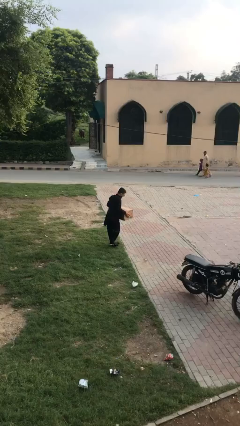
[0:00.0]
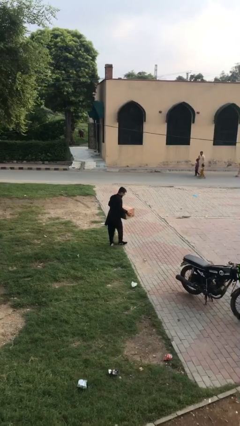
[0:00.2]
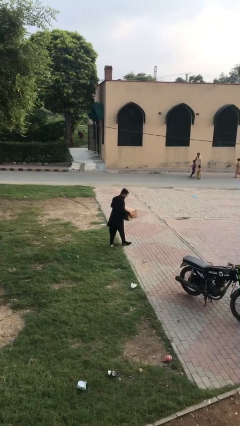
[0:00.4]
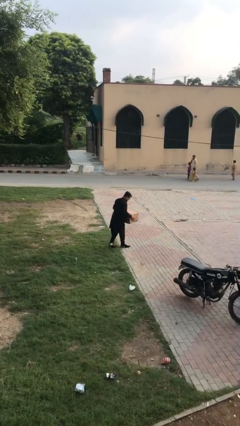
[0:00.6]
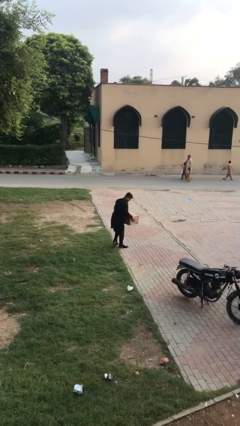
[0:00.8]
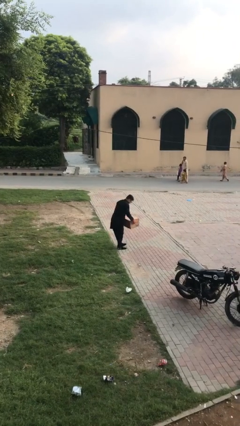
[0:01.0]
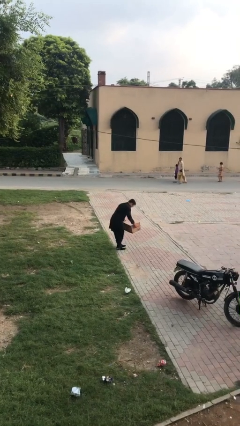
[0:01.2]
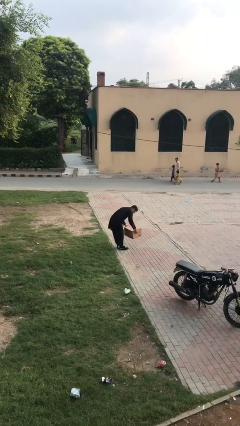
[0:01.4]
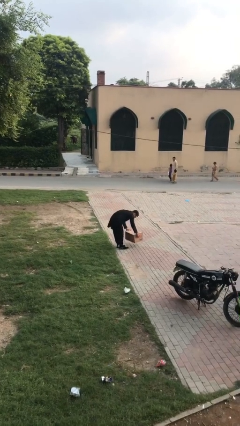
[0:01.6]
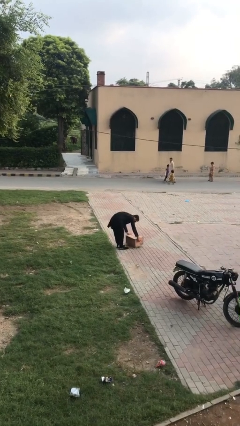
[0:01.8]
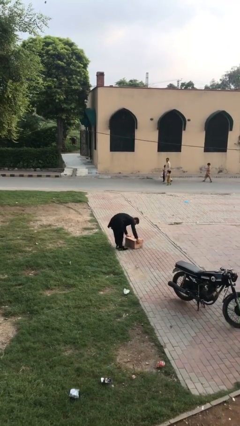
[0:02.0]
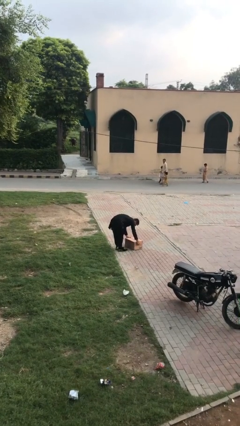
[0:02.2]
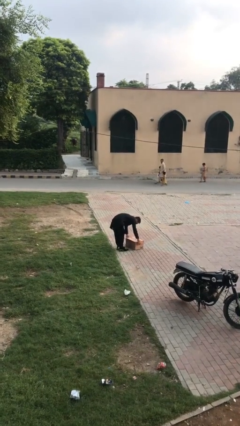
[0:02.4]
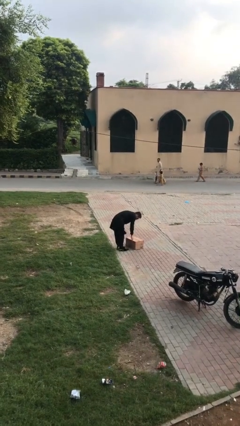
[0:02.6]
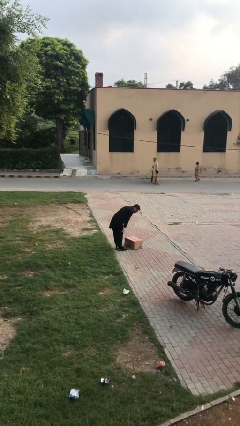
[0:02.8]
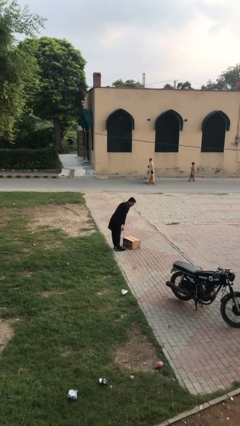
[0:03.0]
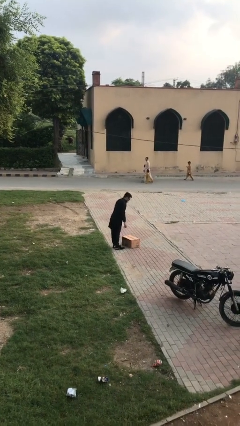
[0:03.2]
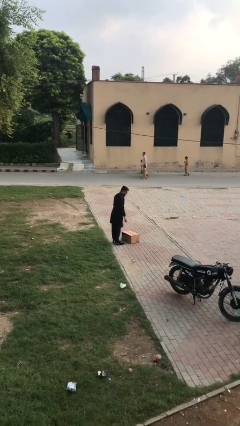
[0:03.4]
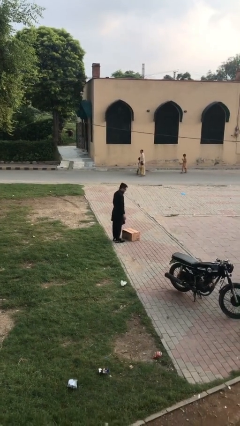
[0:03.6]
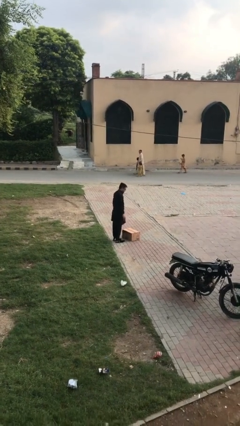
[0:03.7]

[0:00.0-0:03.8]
person puts down object on floor

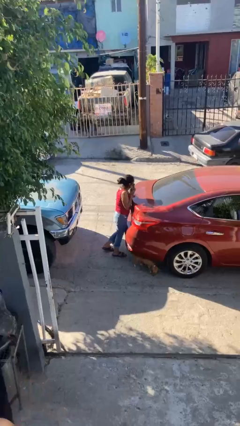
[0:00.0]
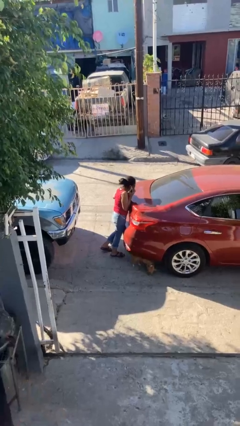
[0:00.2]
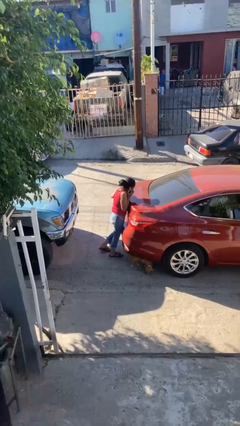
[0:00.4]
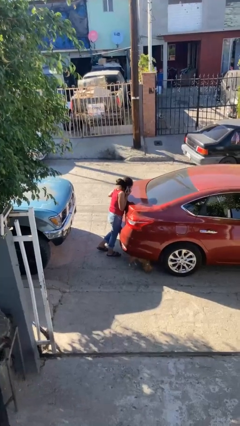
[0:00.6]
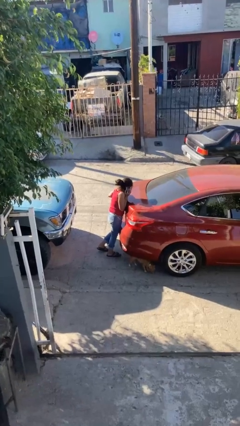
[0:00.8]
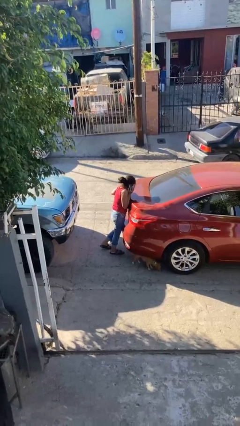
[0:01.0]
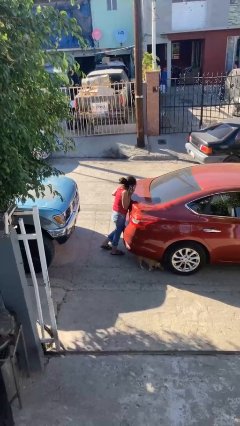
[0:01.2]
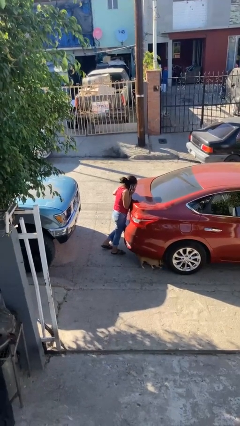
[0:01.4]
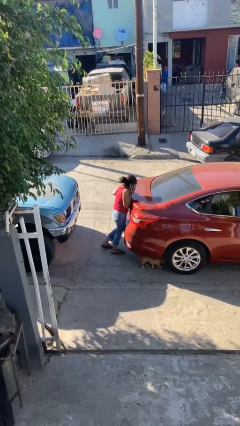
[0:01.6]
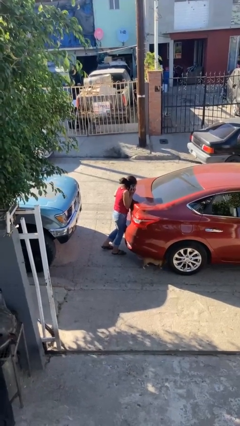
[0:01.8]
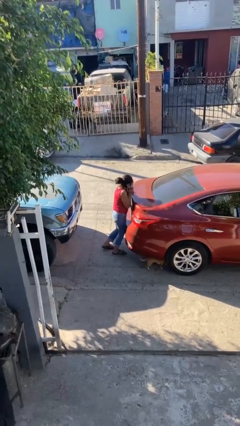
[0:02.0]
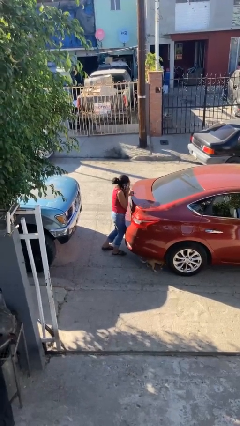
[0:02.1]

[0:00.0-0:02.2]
person leans against car

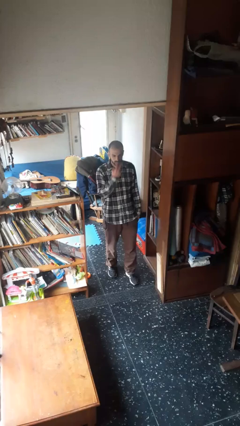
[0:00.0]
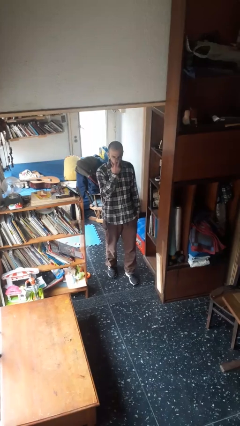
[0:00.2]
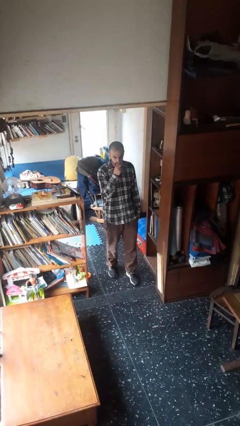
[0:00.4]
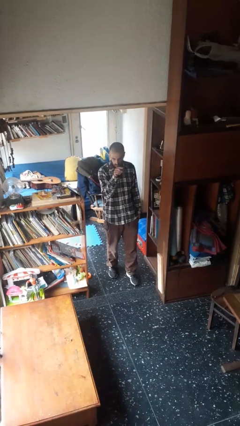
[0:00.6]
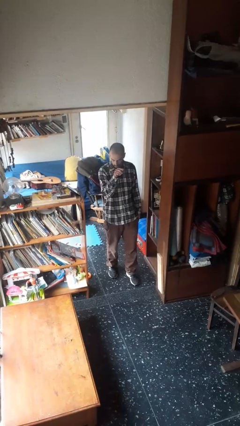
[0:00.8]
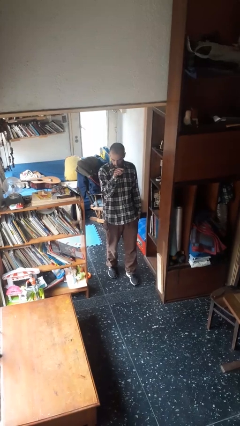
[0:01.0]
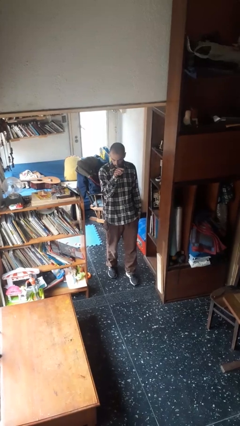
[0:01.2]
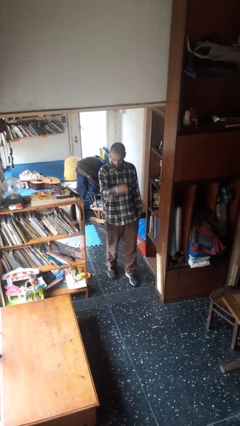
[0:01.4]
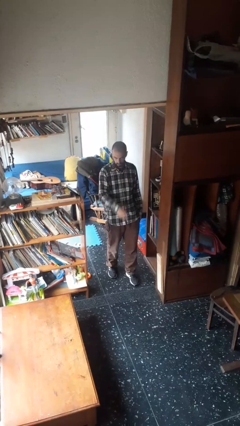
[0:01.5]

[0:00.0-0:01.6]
person gestures watch closely

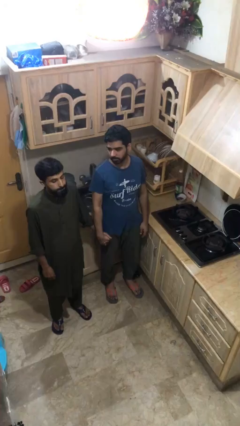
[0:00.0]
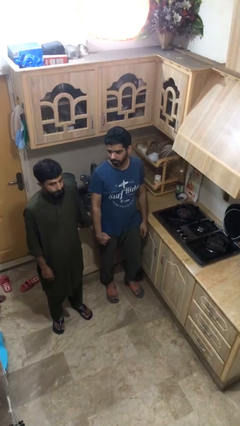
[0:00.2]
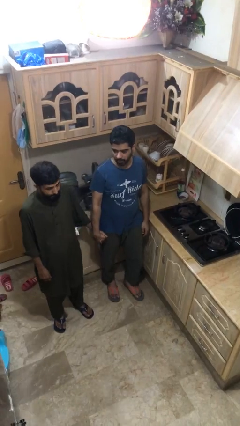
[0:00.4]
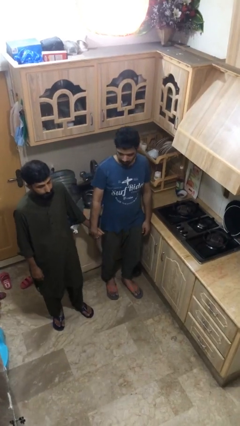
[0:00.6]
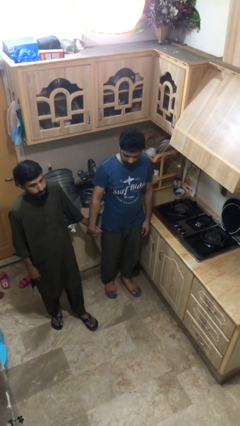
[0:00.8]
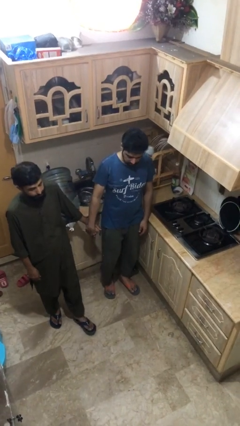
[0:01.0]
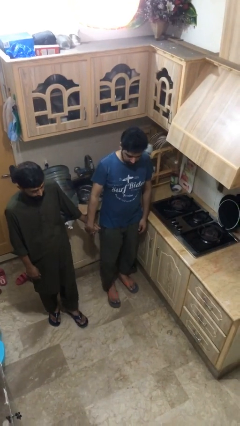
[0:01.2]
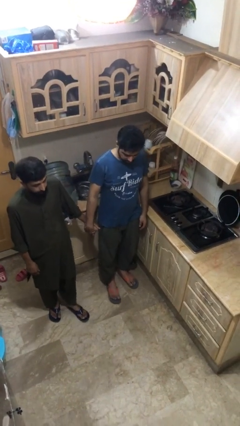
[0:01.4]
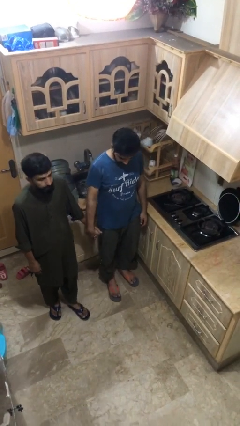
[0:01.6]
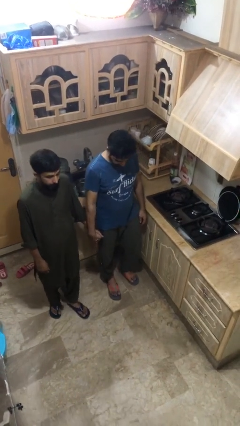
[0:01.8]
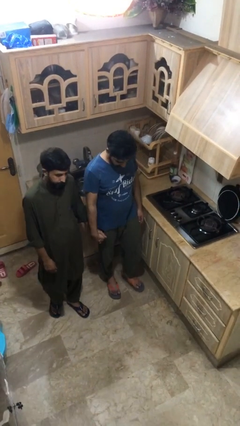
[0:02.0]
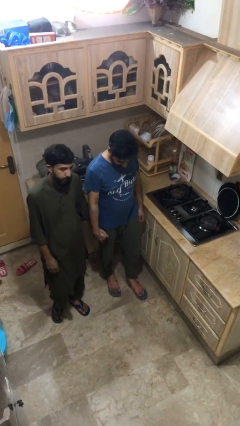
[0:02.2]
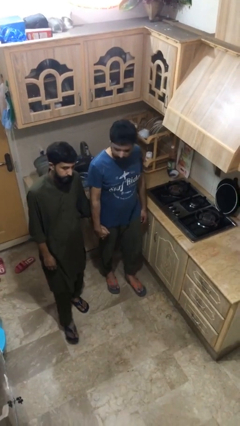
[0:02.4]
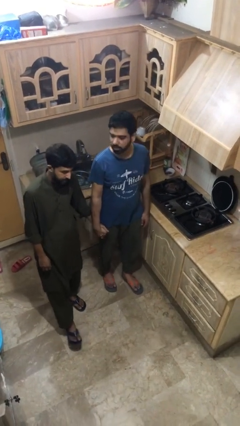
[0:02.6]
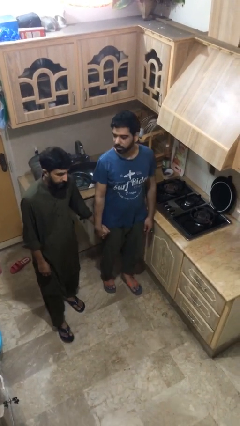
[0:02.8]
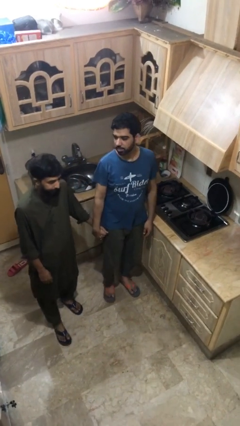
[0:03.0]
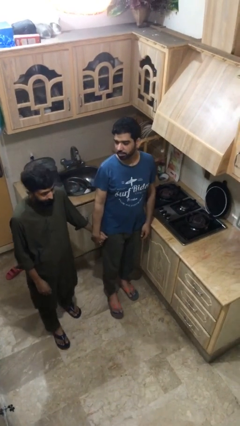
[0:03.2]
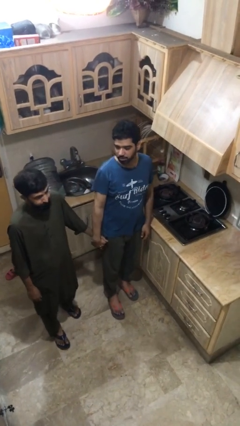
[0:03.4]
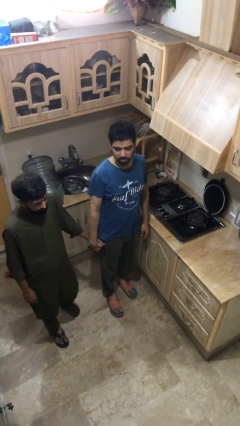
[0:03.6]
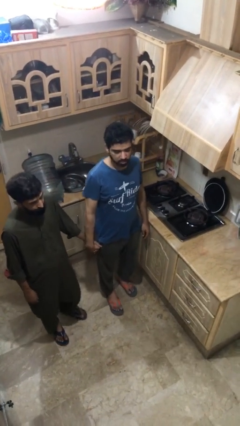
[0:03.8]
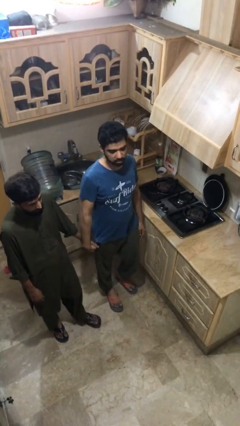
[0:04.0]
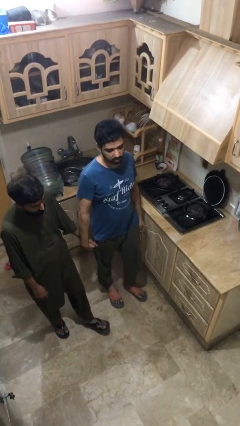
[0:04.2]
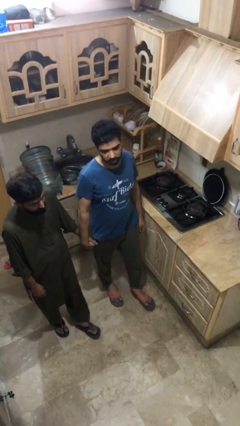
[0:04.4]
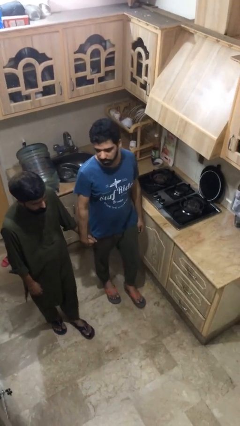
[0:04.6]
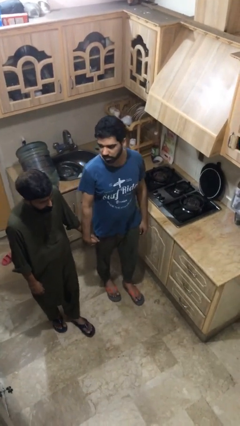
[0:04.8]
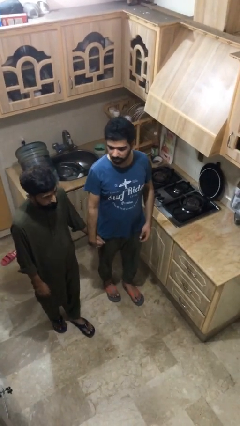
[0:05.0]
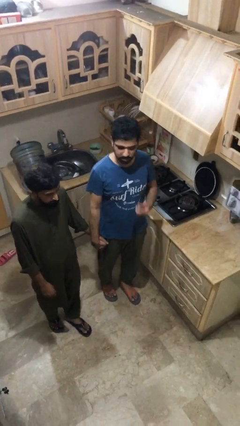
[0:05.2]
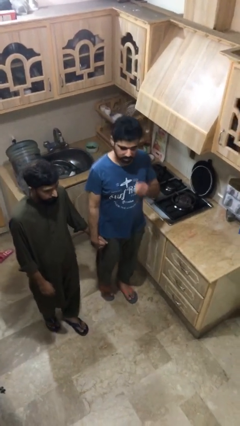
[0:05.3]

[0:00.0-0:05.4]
person holds hand

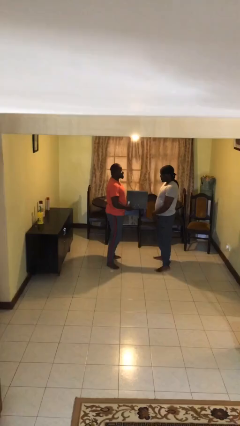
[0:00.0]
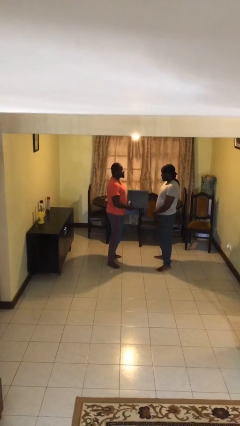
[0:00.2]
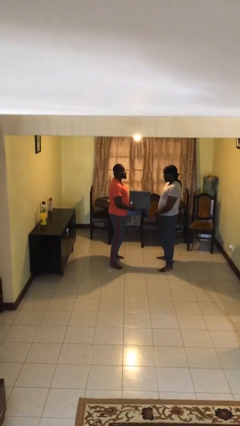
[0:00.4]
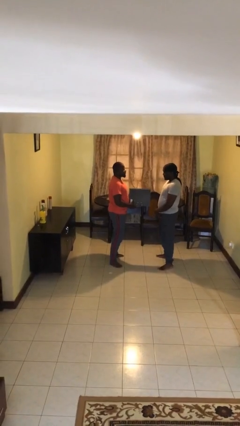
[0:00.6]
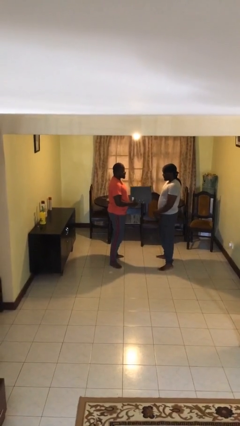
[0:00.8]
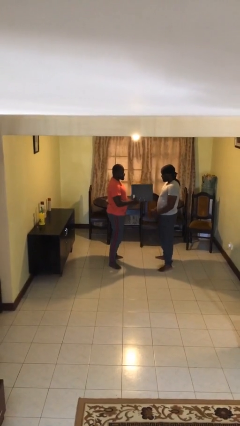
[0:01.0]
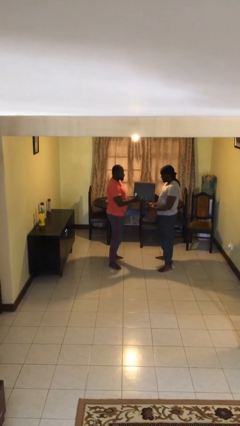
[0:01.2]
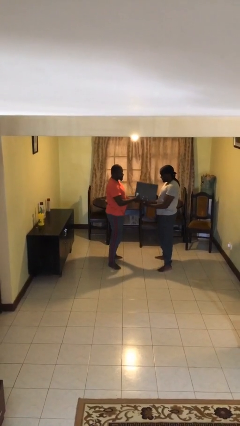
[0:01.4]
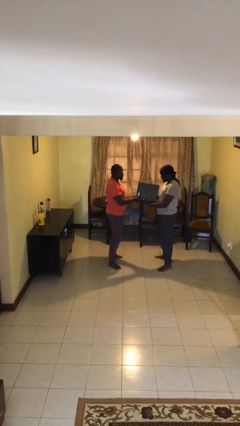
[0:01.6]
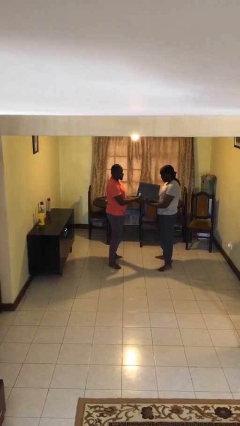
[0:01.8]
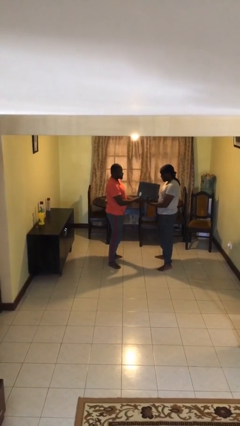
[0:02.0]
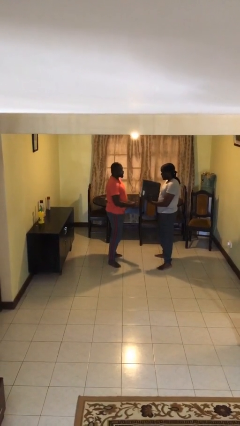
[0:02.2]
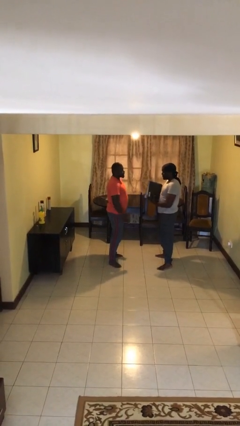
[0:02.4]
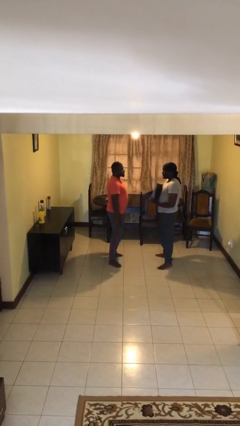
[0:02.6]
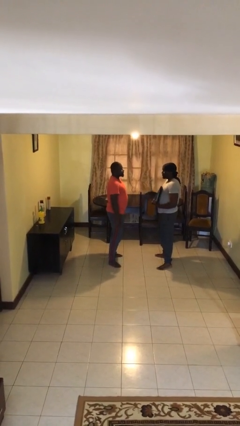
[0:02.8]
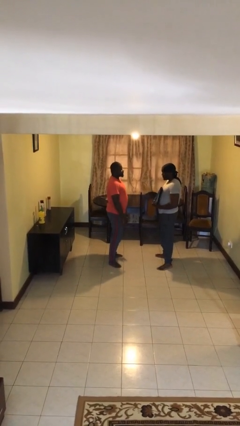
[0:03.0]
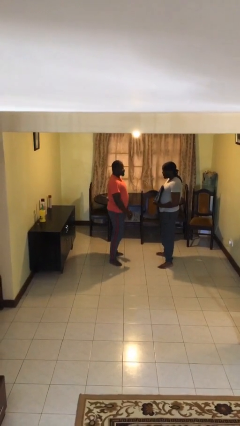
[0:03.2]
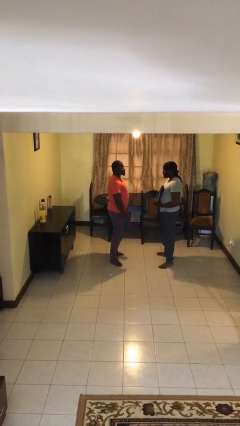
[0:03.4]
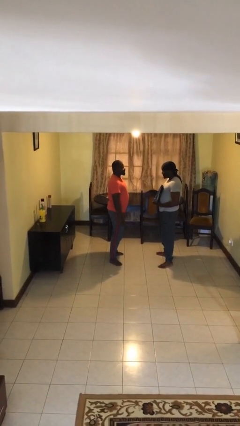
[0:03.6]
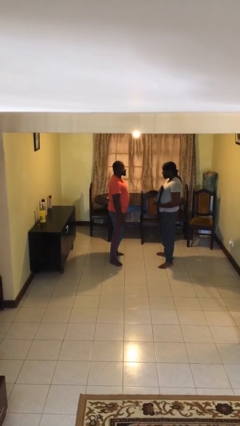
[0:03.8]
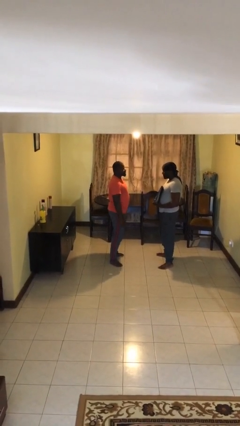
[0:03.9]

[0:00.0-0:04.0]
person transfers object to person

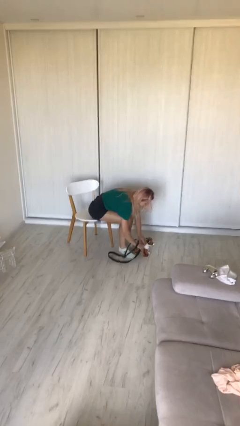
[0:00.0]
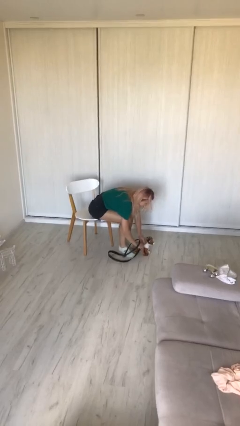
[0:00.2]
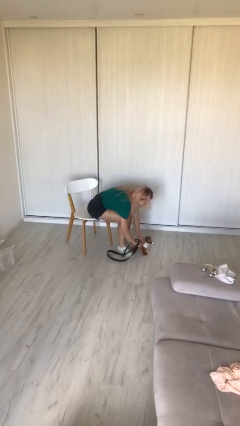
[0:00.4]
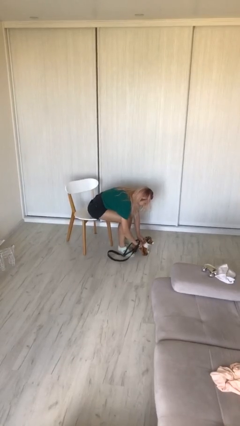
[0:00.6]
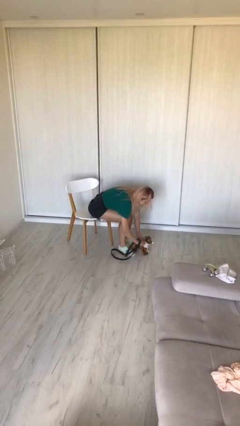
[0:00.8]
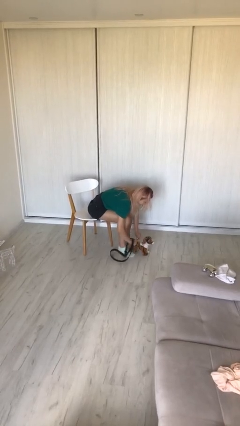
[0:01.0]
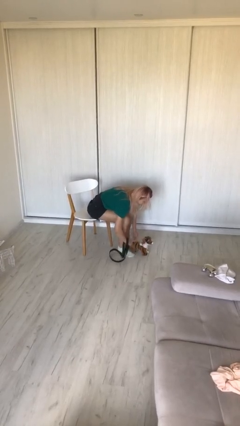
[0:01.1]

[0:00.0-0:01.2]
person unattaches leash from dog
